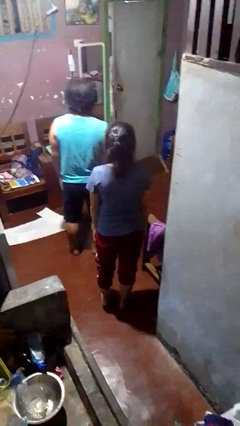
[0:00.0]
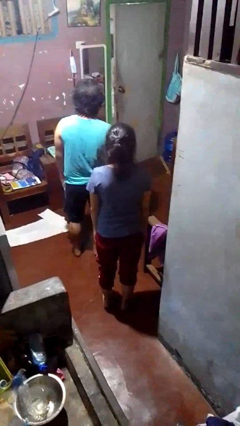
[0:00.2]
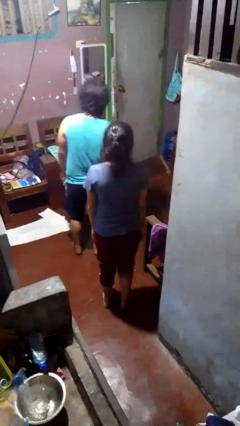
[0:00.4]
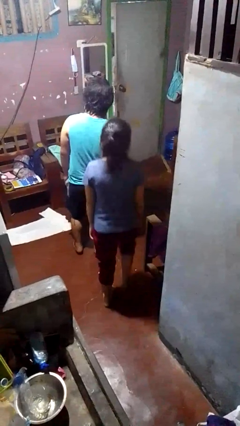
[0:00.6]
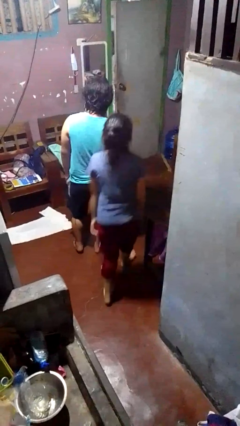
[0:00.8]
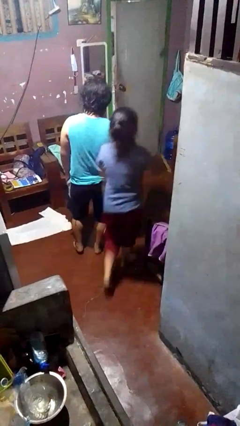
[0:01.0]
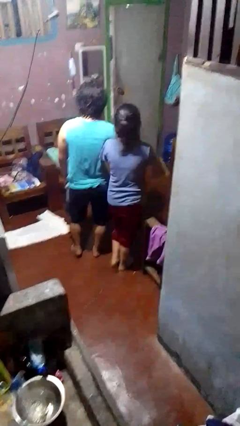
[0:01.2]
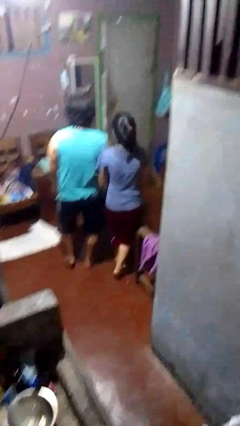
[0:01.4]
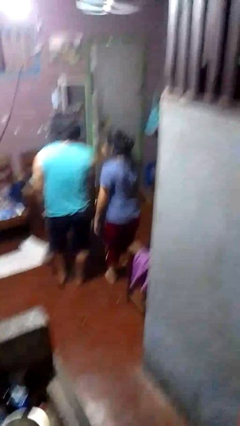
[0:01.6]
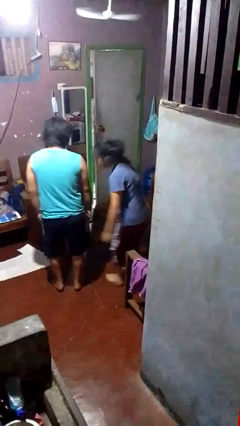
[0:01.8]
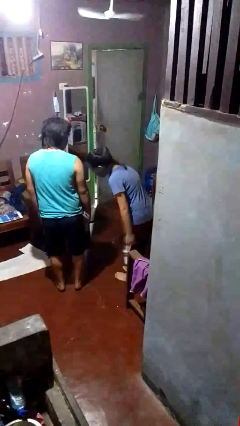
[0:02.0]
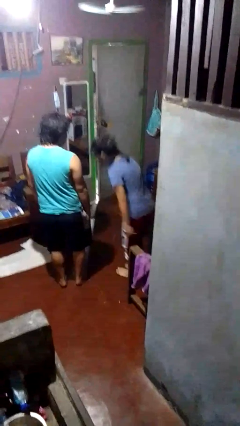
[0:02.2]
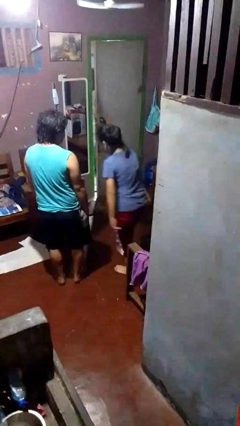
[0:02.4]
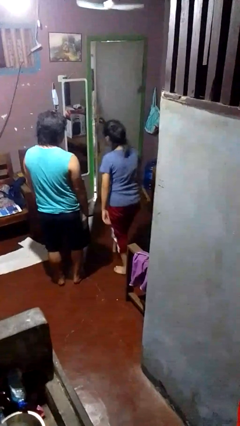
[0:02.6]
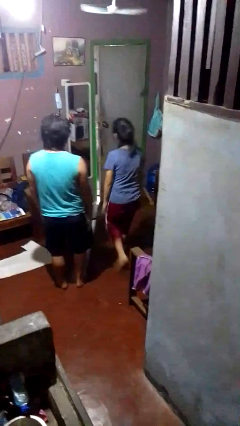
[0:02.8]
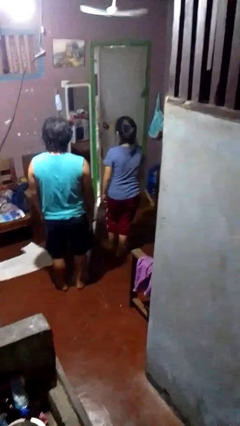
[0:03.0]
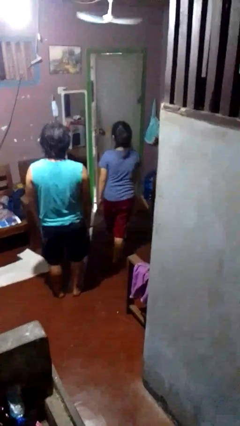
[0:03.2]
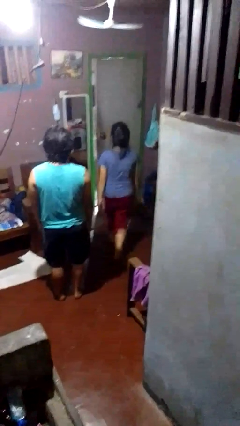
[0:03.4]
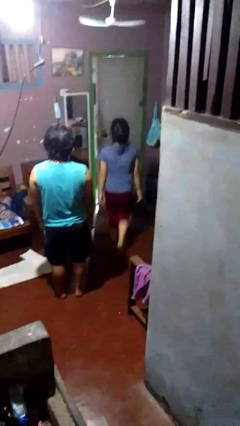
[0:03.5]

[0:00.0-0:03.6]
person bumps into person

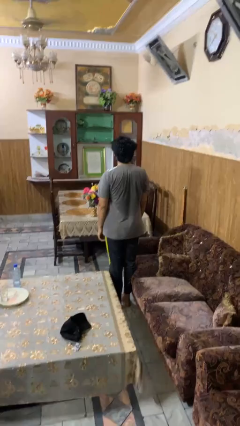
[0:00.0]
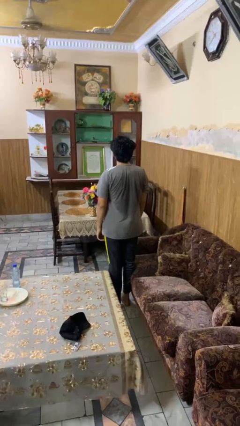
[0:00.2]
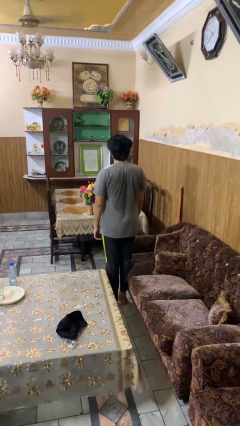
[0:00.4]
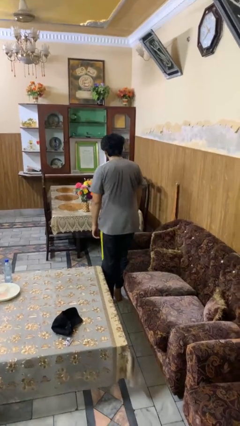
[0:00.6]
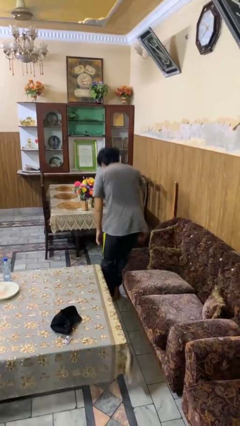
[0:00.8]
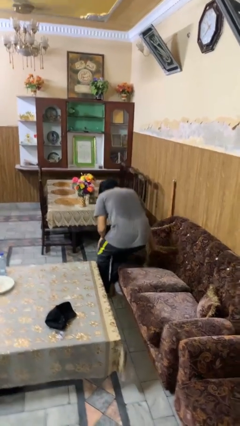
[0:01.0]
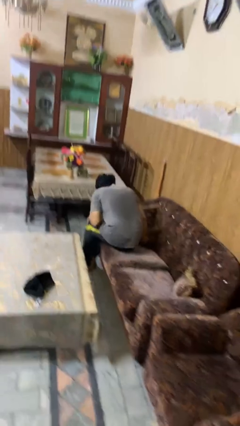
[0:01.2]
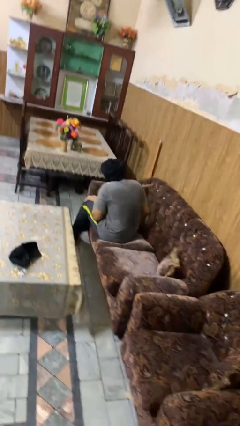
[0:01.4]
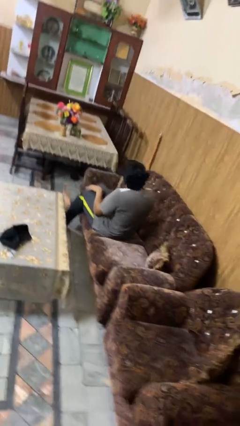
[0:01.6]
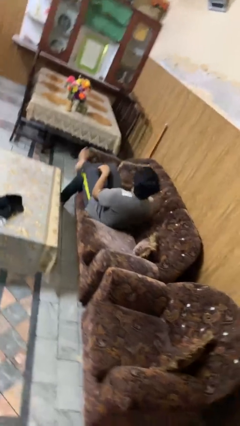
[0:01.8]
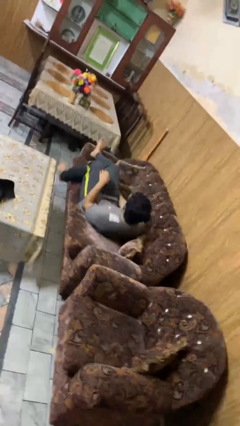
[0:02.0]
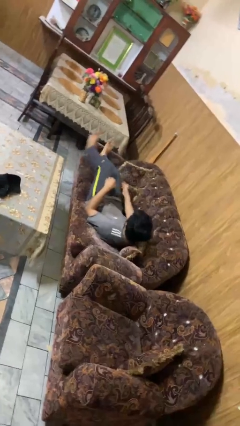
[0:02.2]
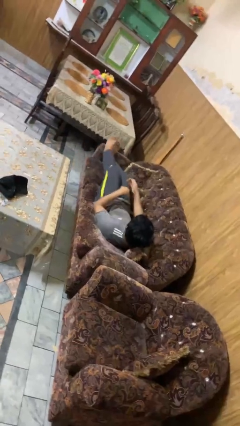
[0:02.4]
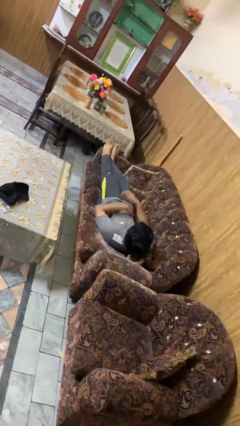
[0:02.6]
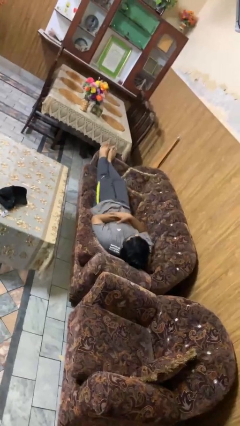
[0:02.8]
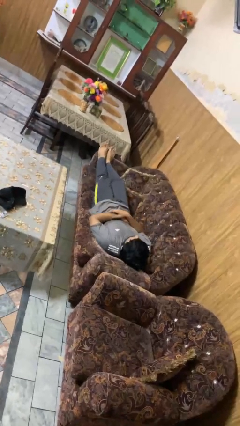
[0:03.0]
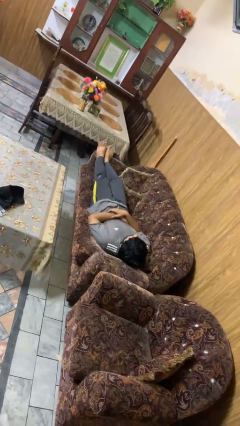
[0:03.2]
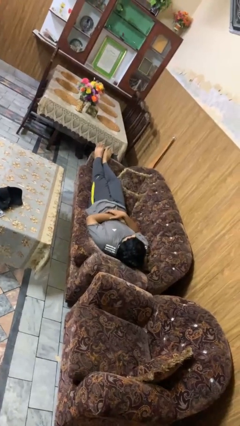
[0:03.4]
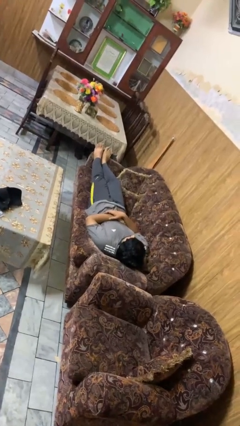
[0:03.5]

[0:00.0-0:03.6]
person lies down on couch

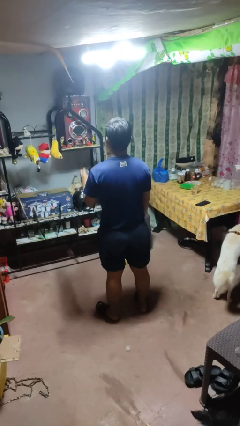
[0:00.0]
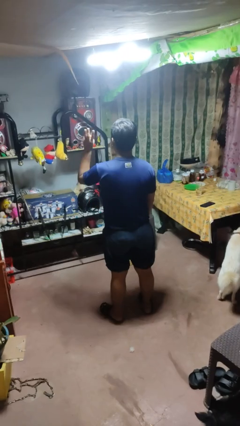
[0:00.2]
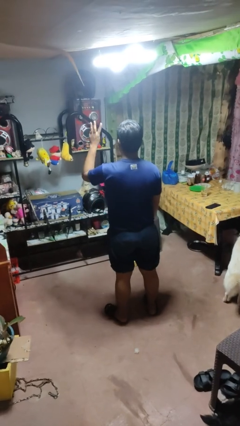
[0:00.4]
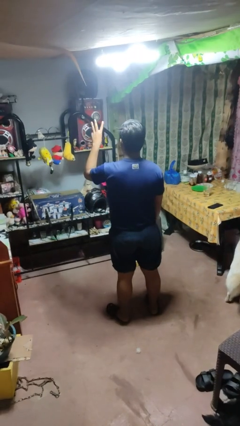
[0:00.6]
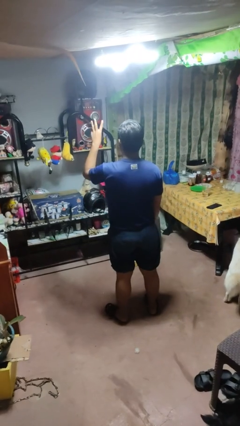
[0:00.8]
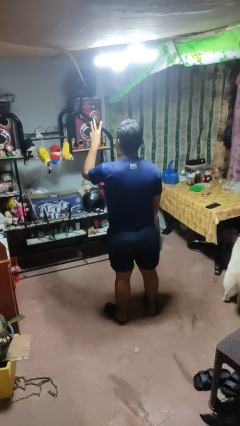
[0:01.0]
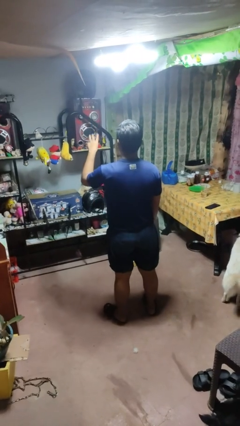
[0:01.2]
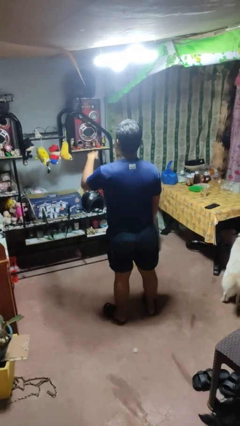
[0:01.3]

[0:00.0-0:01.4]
person gestures number three

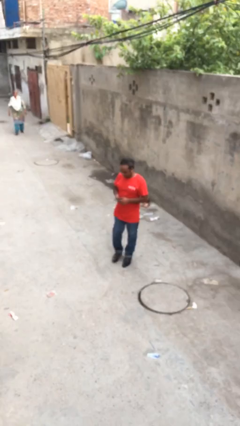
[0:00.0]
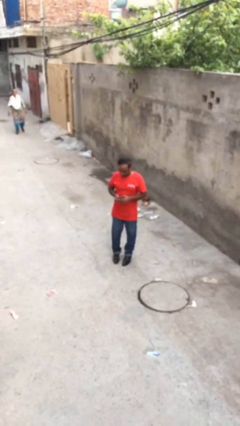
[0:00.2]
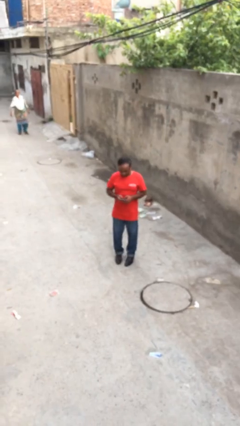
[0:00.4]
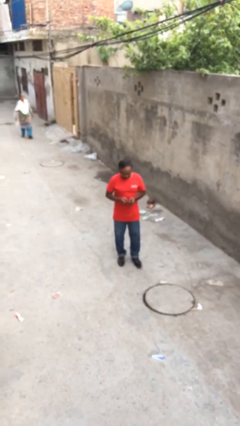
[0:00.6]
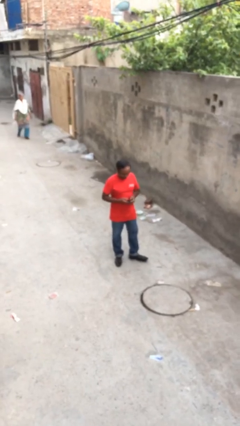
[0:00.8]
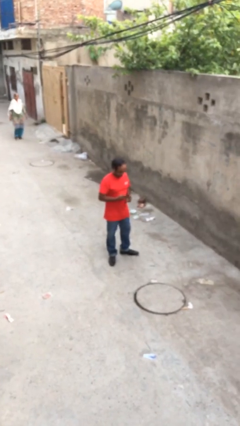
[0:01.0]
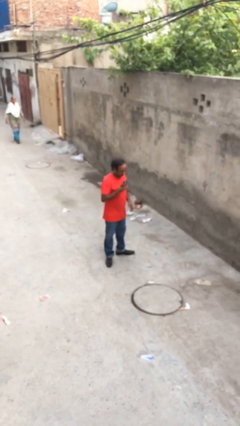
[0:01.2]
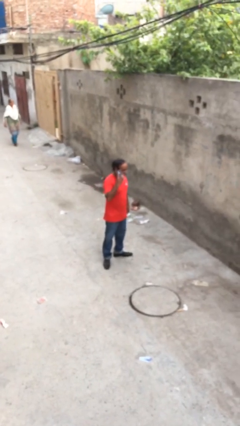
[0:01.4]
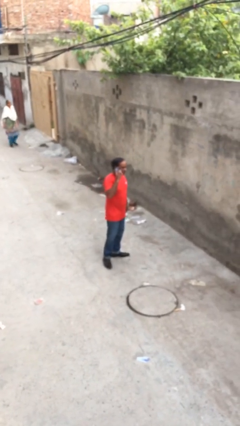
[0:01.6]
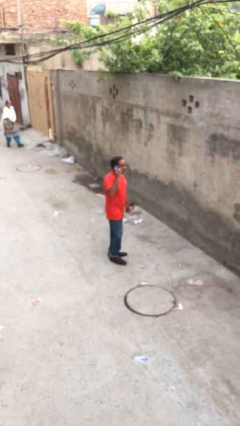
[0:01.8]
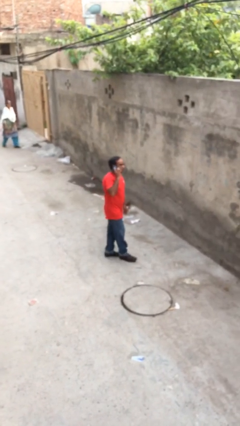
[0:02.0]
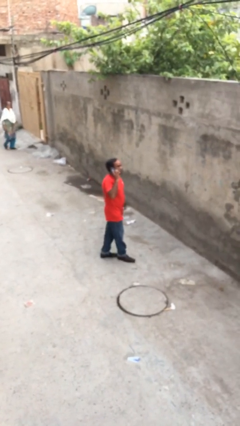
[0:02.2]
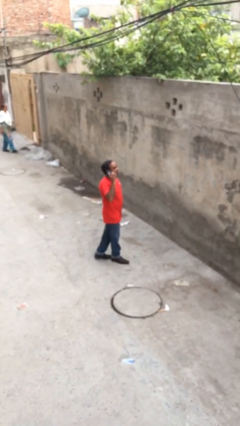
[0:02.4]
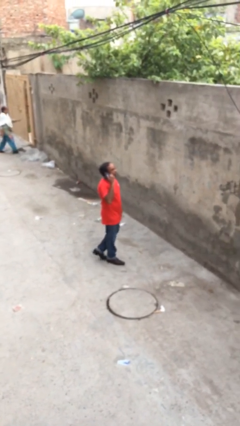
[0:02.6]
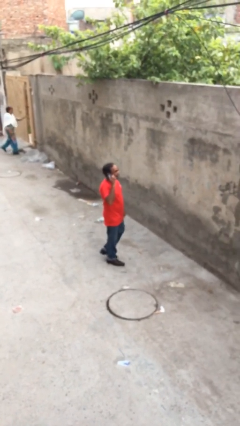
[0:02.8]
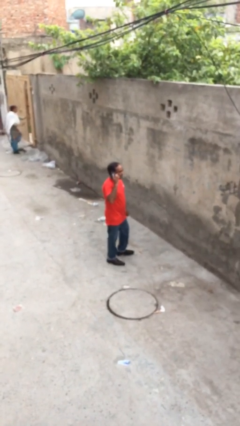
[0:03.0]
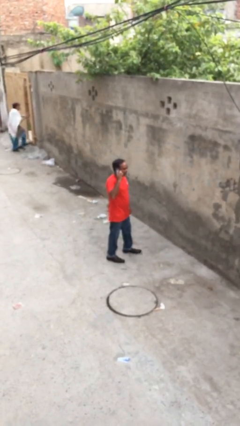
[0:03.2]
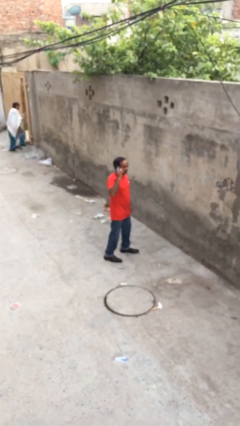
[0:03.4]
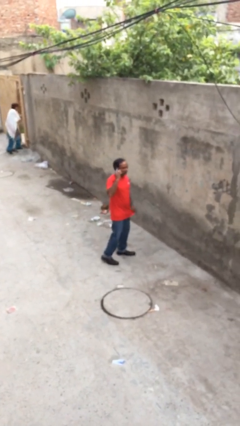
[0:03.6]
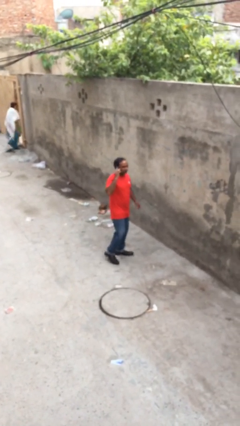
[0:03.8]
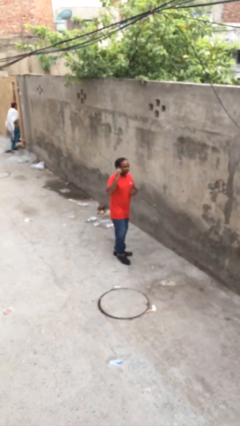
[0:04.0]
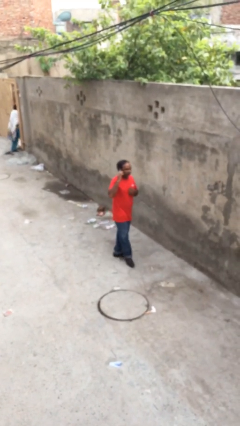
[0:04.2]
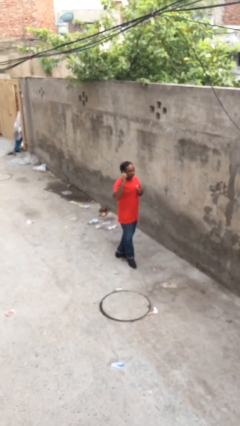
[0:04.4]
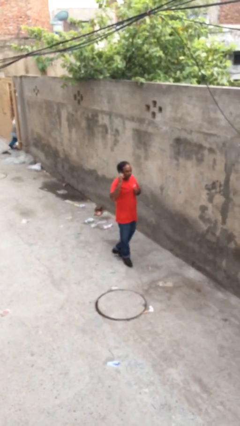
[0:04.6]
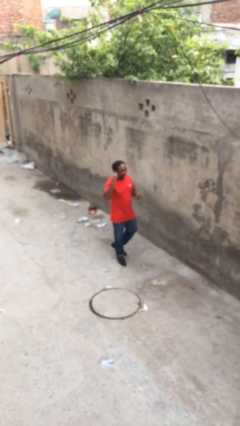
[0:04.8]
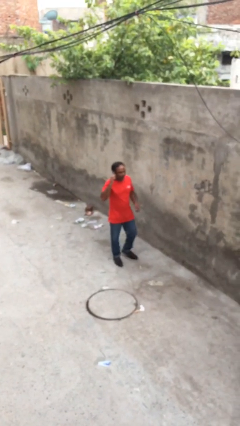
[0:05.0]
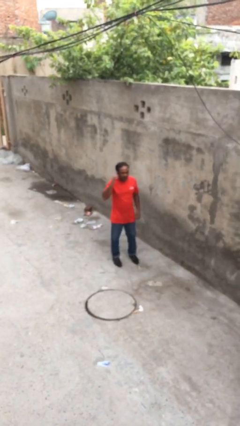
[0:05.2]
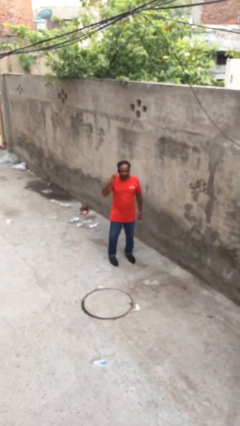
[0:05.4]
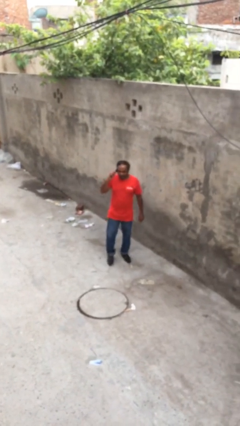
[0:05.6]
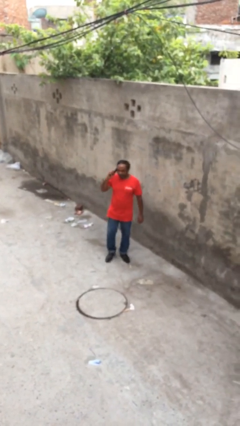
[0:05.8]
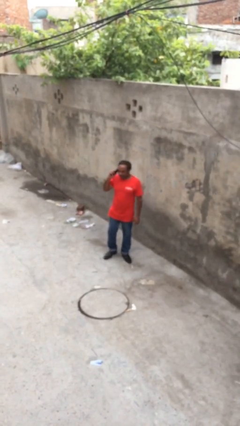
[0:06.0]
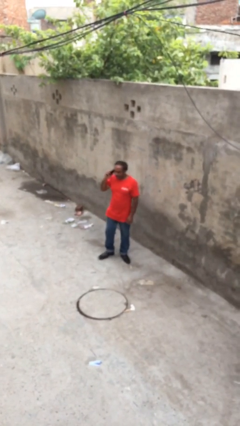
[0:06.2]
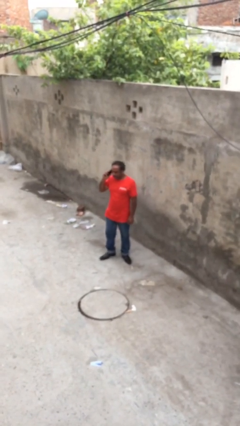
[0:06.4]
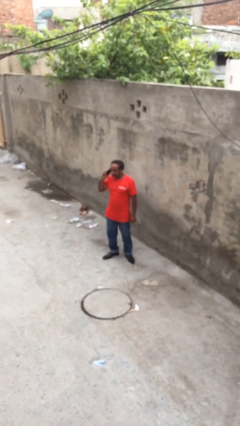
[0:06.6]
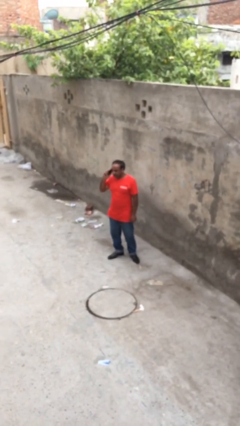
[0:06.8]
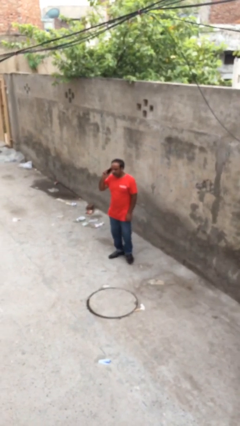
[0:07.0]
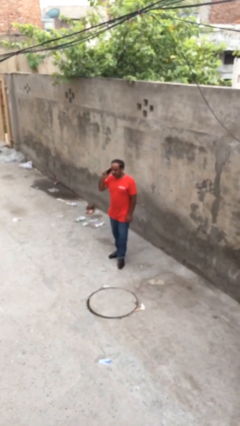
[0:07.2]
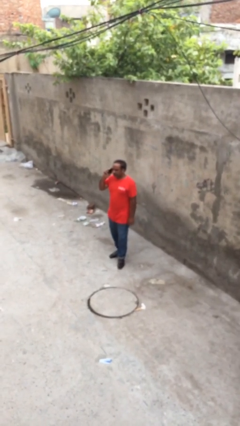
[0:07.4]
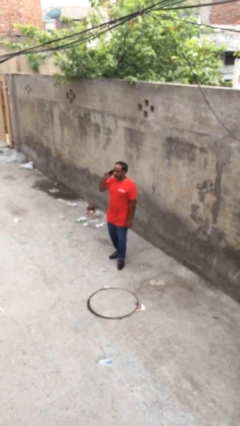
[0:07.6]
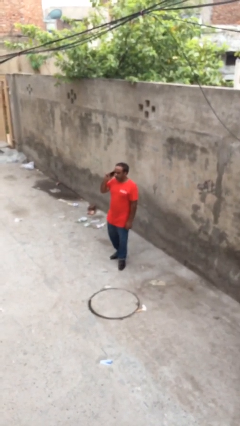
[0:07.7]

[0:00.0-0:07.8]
person talks on phone

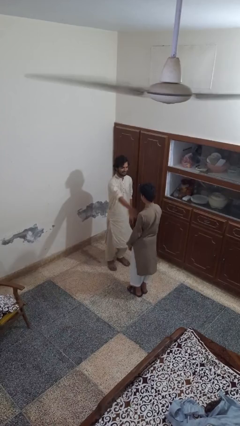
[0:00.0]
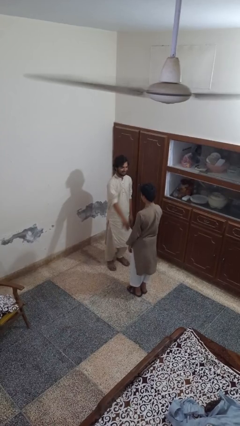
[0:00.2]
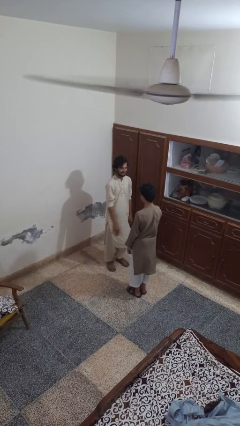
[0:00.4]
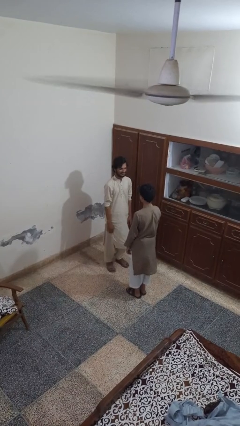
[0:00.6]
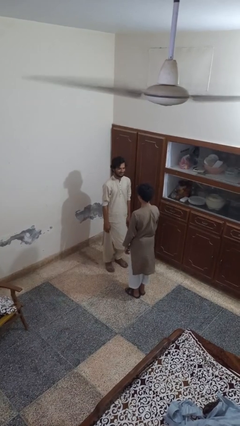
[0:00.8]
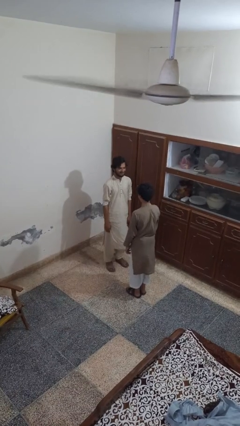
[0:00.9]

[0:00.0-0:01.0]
person shoves person

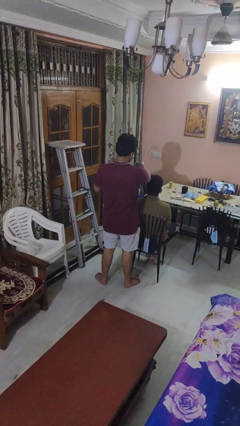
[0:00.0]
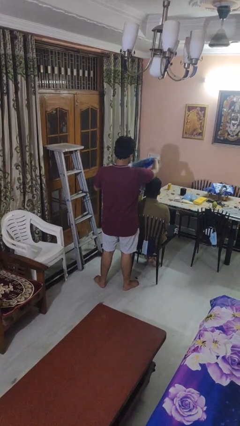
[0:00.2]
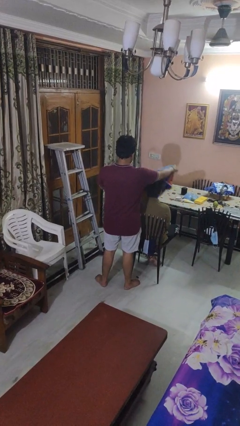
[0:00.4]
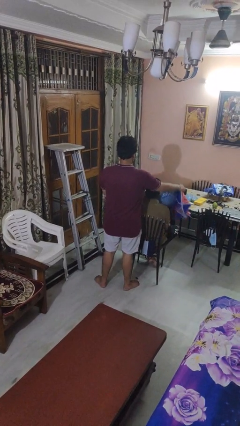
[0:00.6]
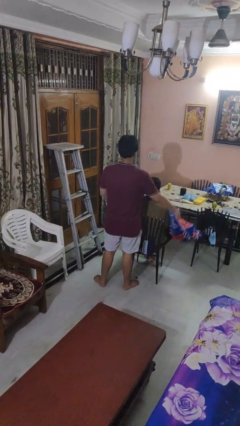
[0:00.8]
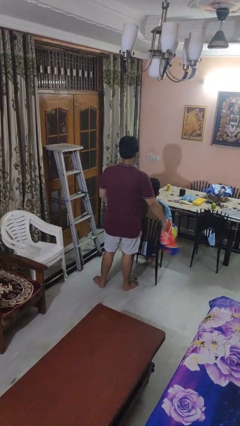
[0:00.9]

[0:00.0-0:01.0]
person covers friend with blanket
